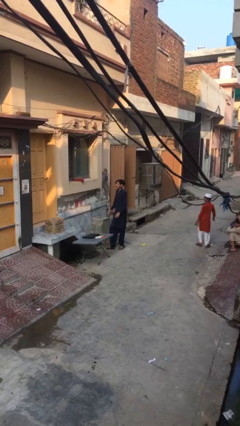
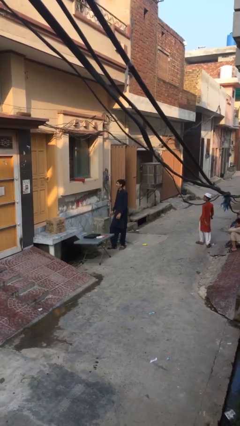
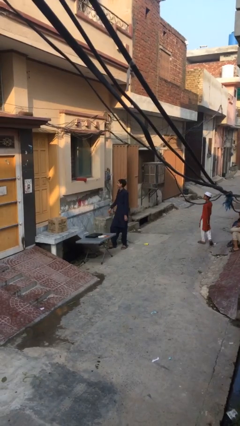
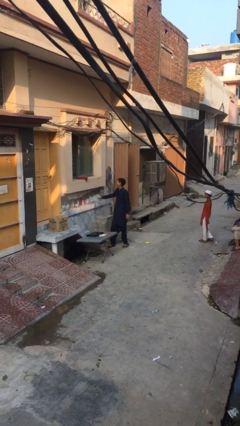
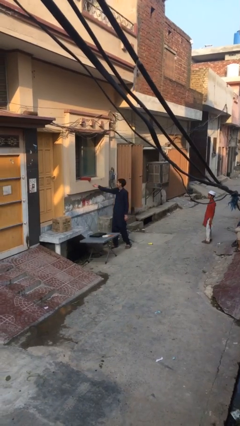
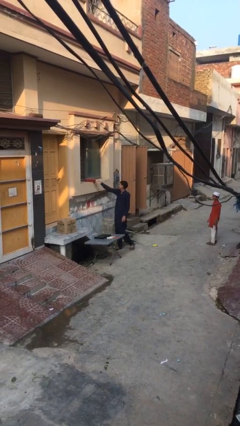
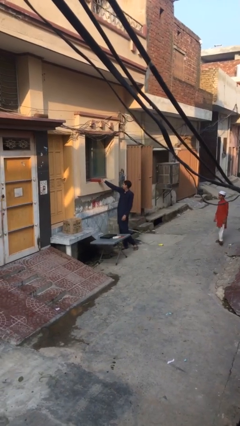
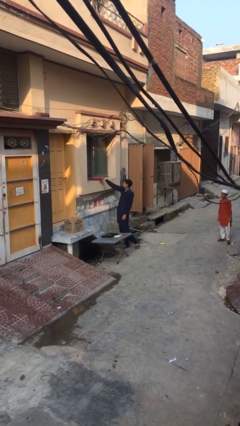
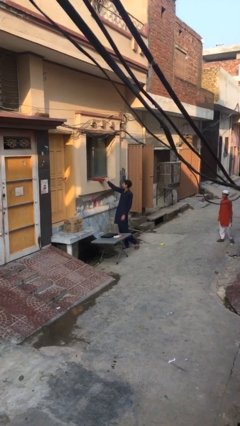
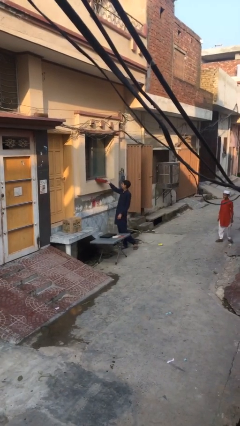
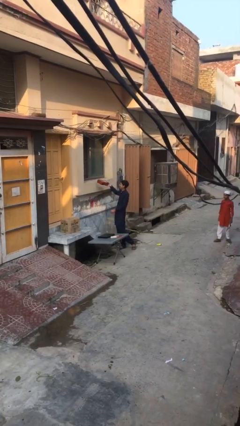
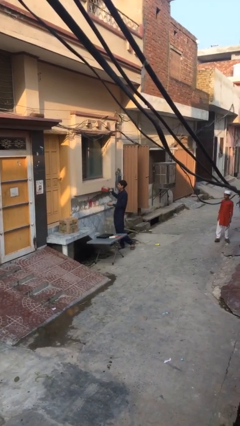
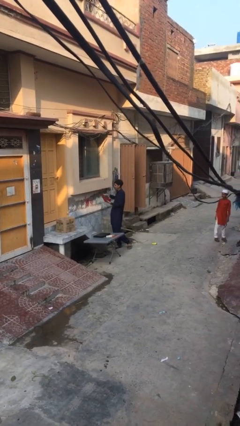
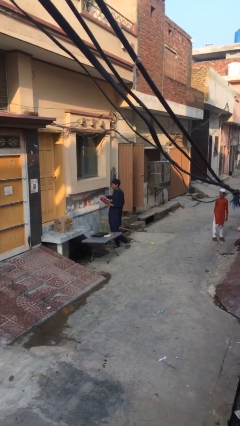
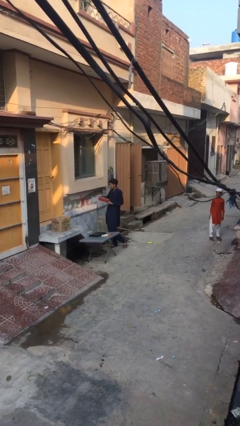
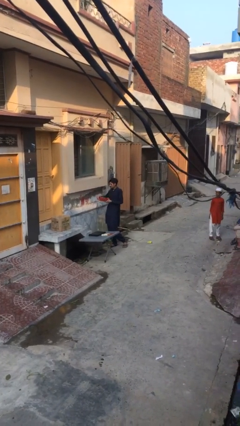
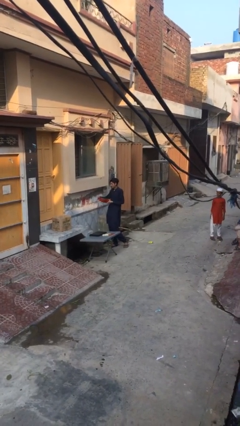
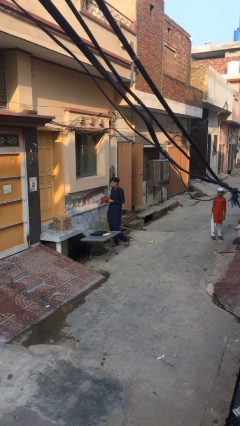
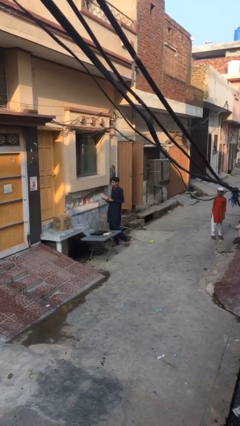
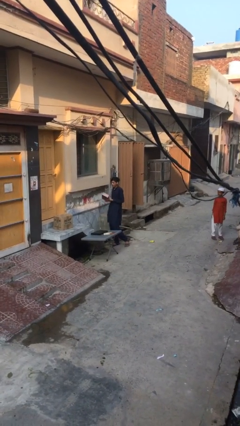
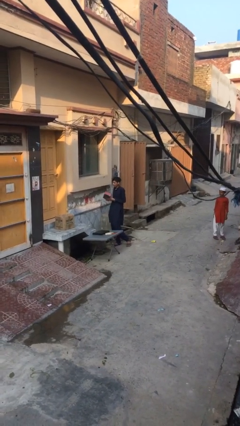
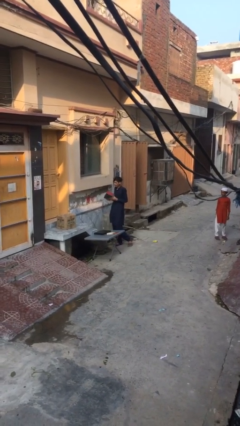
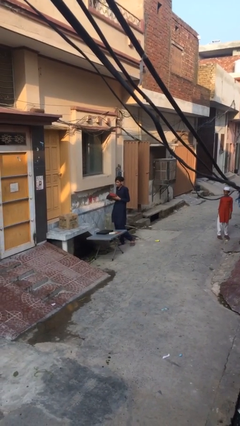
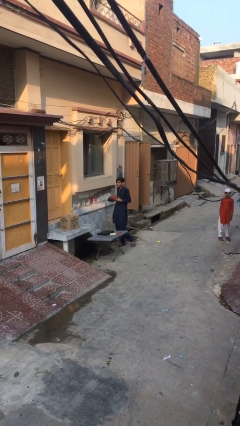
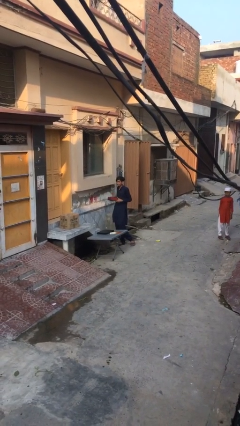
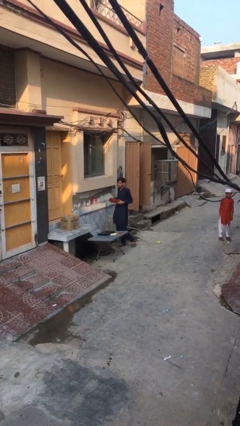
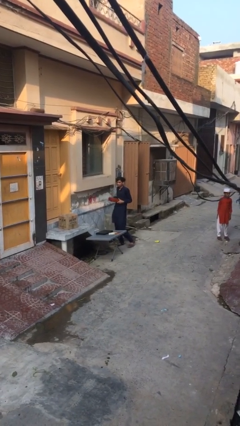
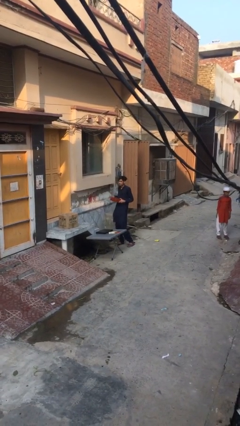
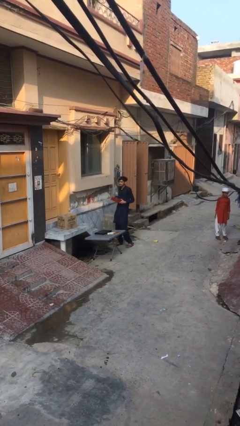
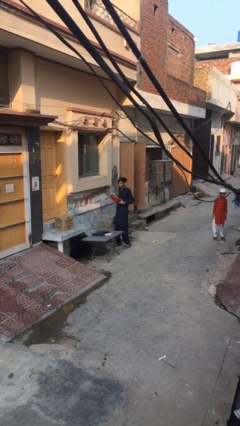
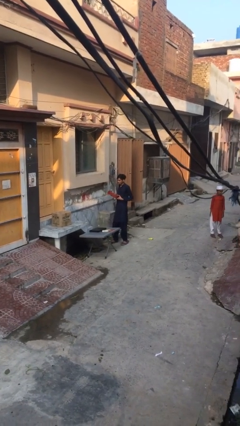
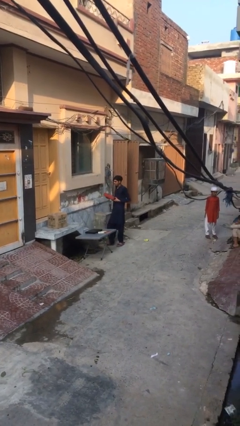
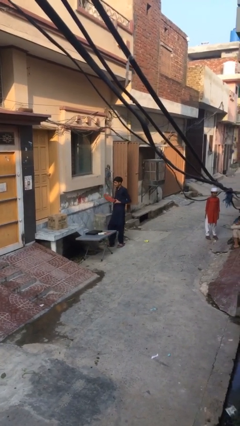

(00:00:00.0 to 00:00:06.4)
person picks up object from shelf

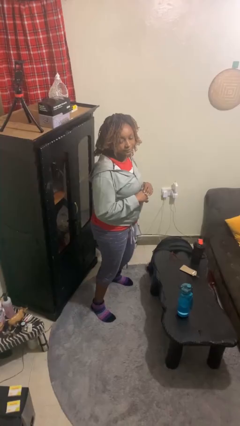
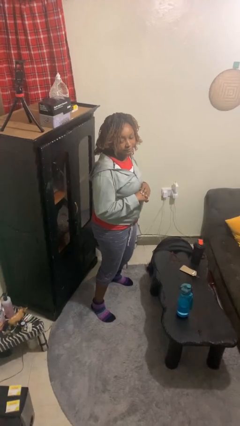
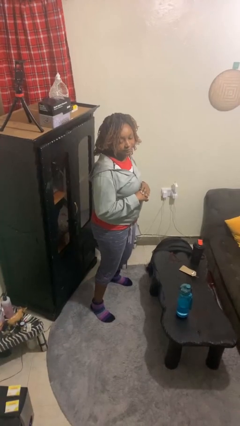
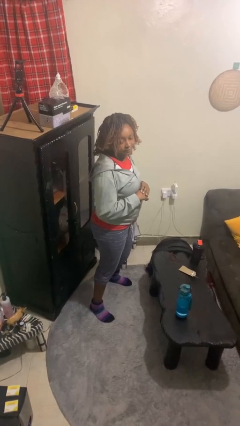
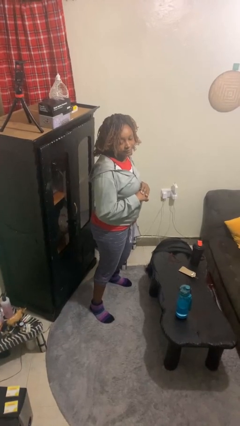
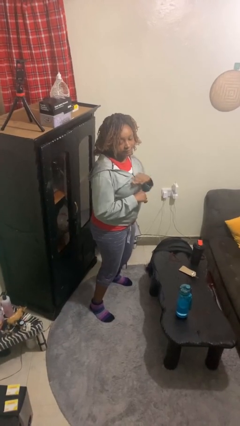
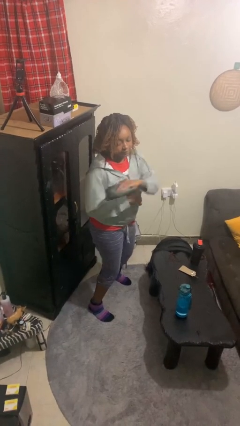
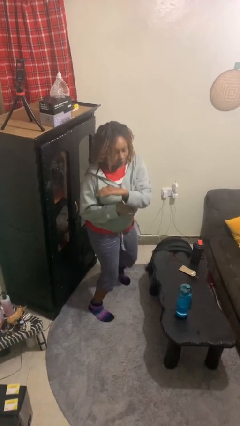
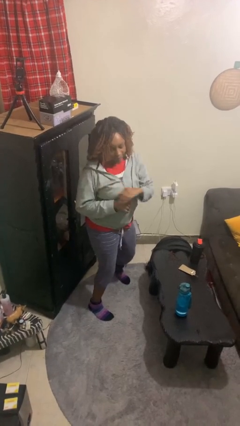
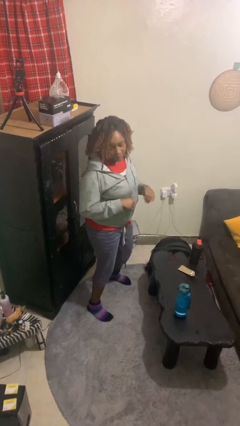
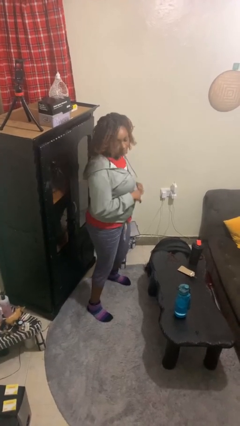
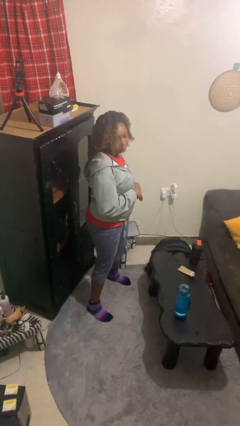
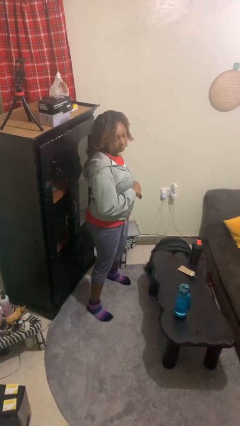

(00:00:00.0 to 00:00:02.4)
person karate chop

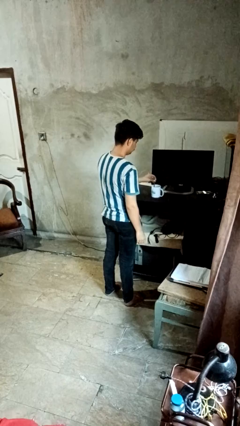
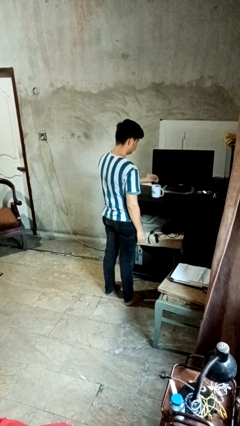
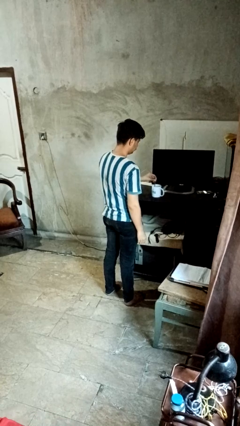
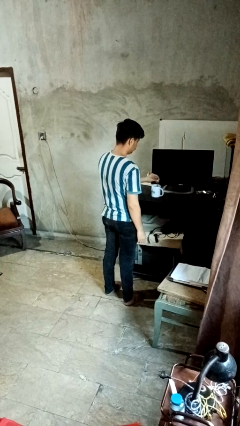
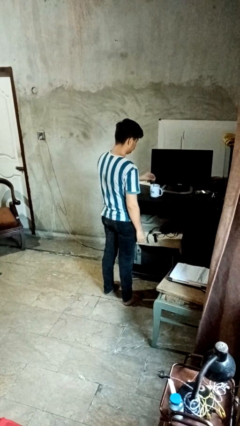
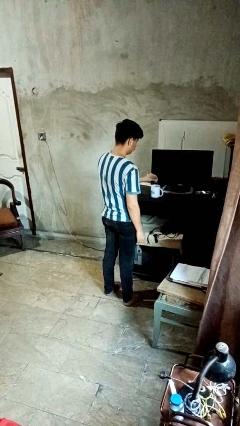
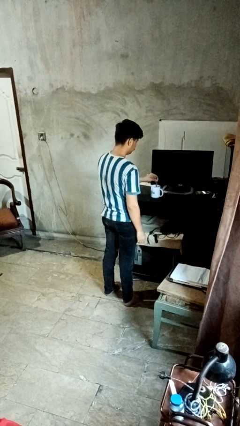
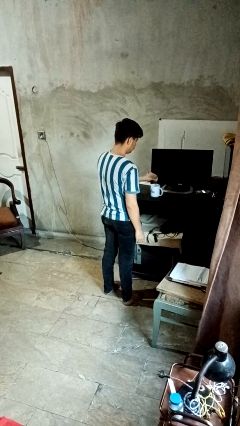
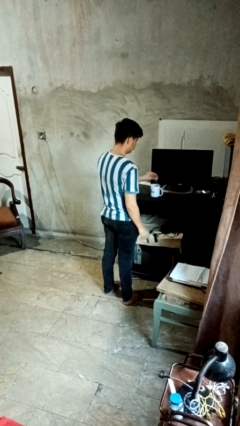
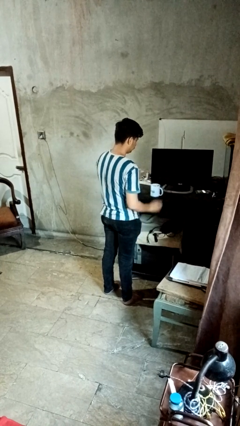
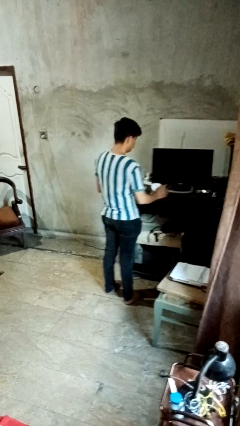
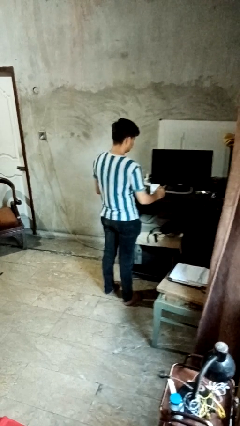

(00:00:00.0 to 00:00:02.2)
person stirs mug

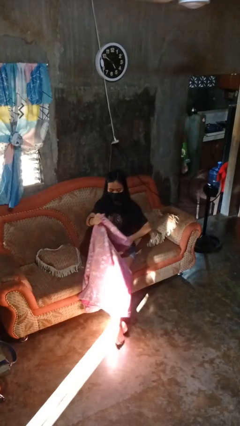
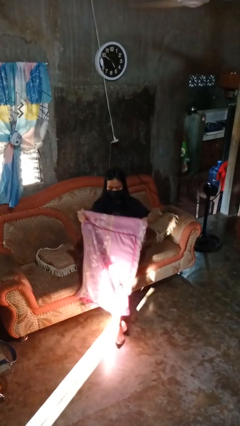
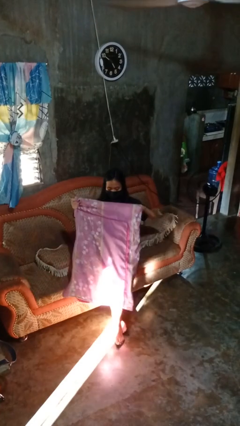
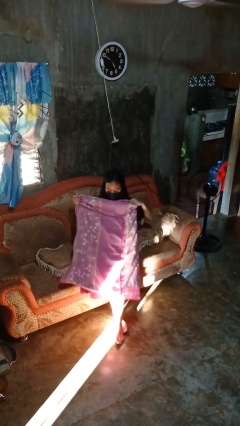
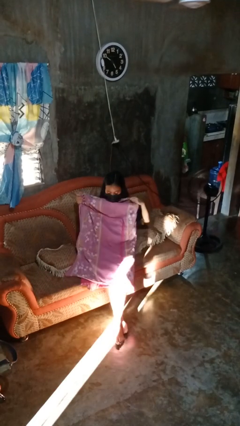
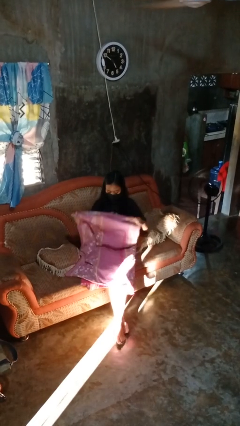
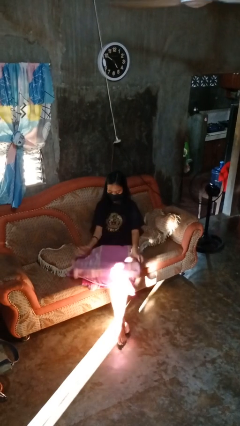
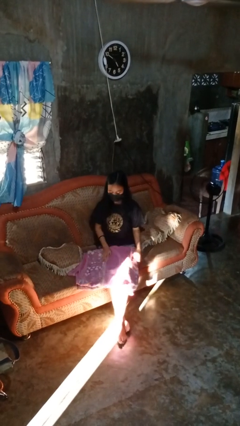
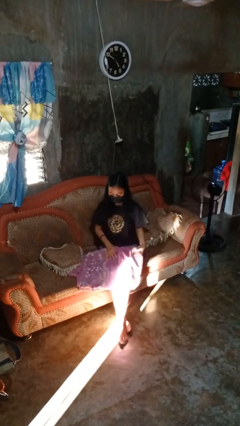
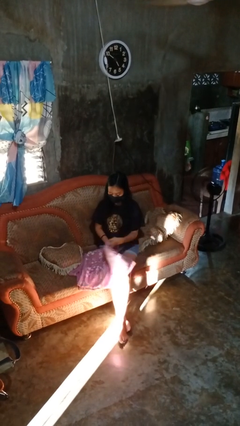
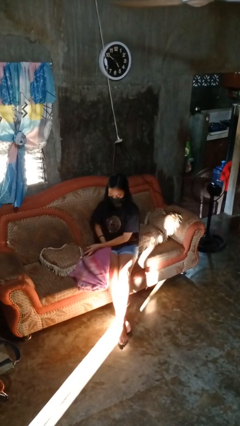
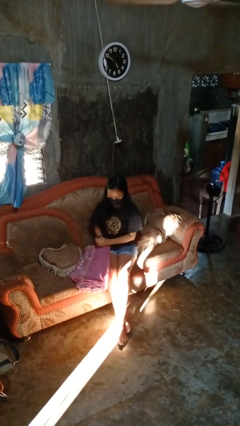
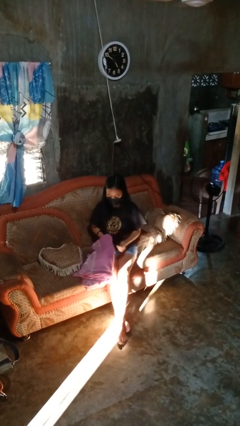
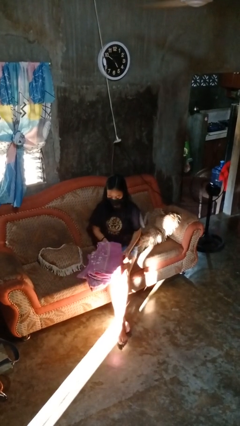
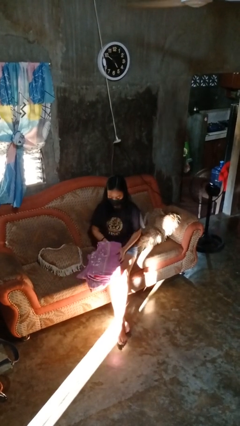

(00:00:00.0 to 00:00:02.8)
person folds blanket

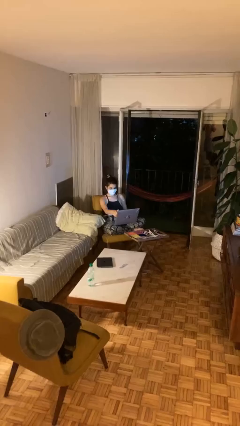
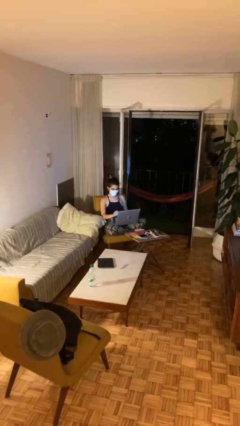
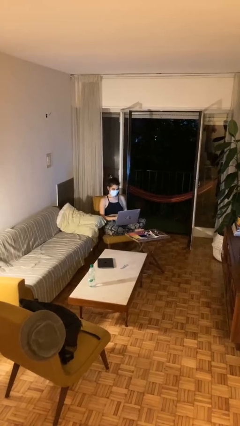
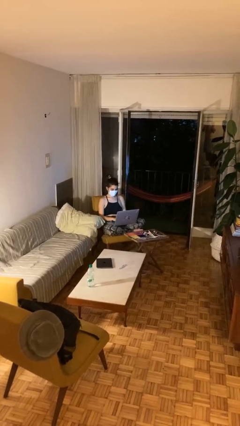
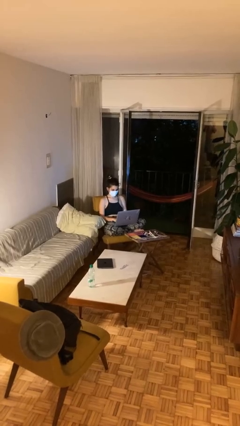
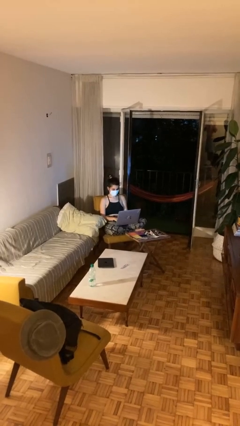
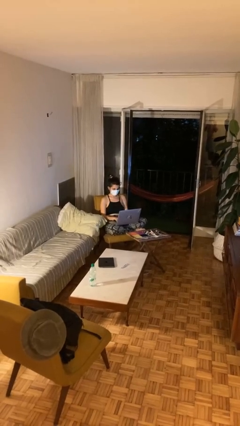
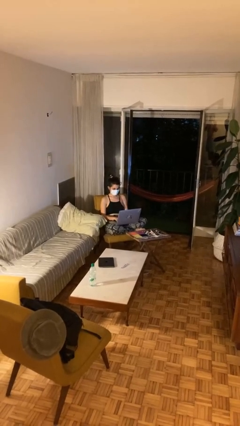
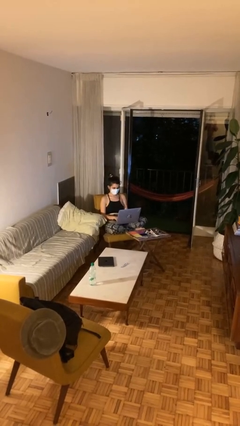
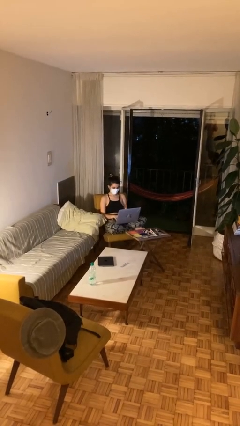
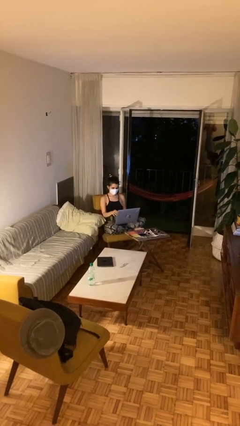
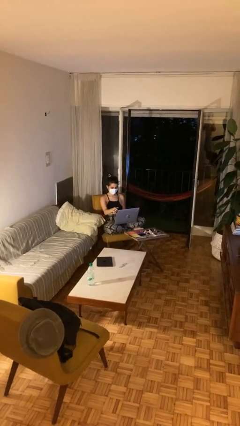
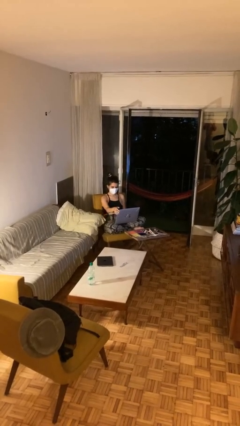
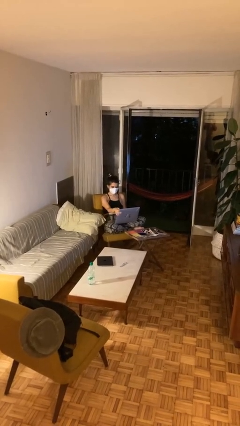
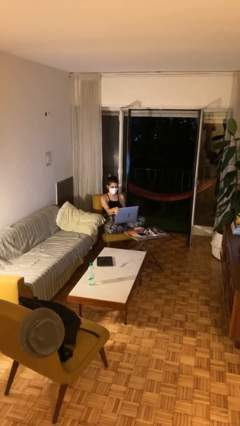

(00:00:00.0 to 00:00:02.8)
person interacts with laptop

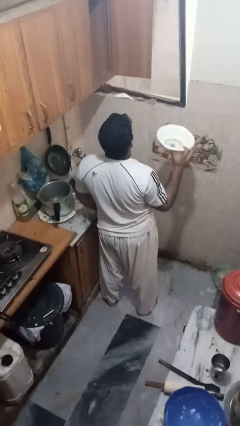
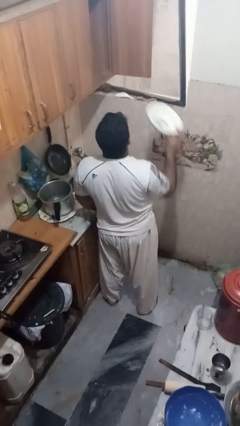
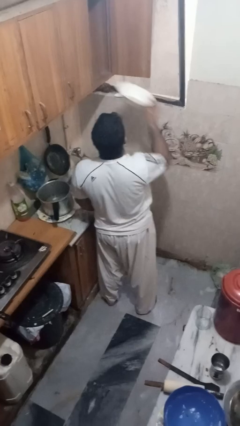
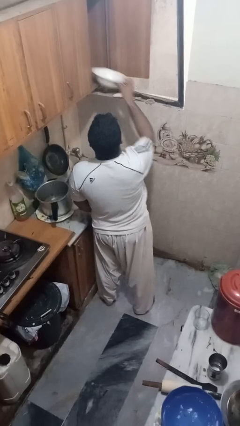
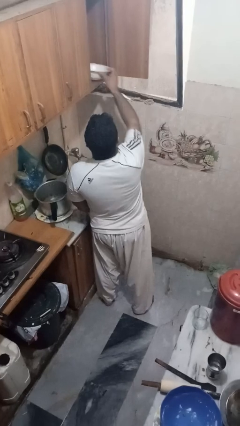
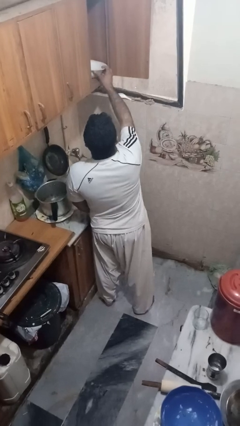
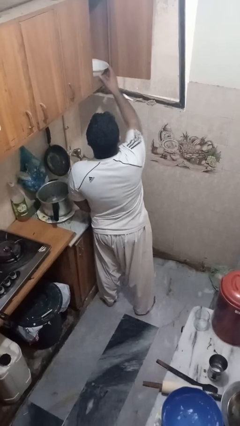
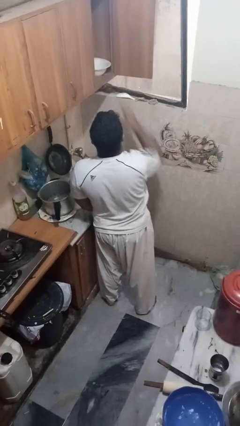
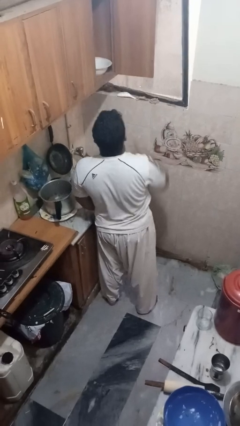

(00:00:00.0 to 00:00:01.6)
person puts object in cabinet
